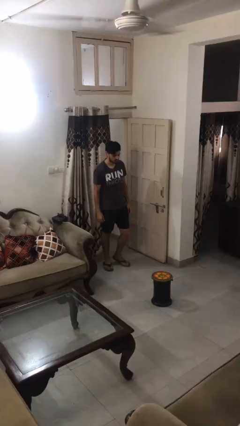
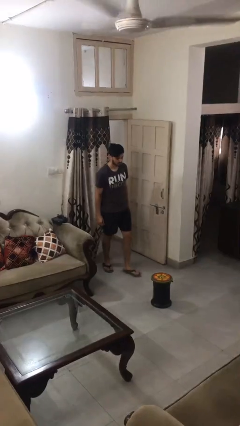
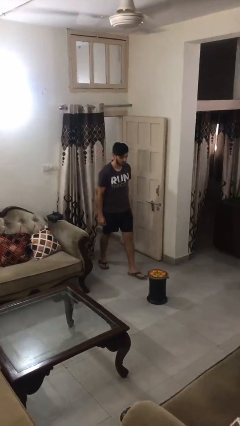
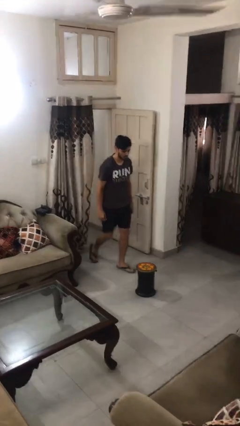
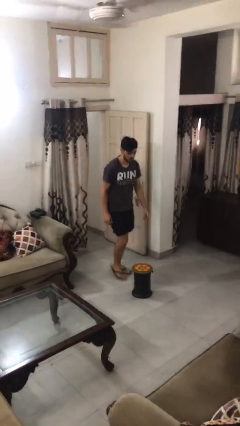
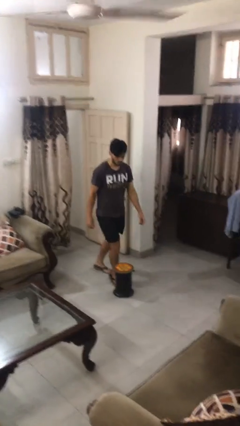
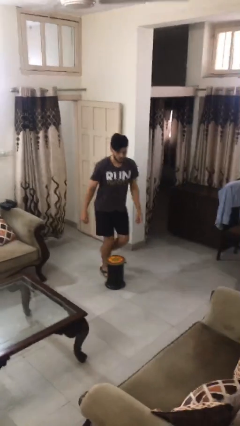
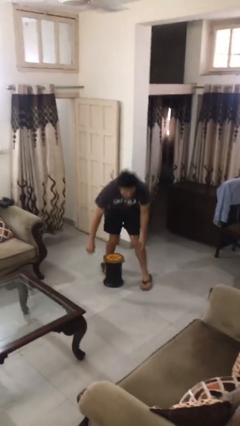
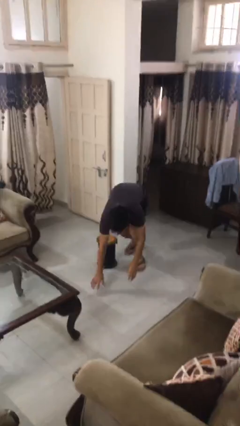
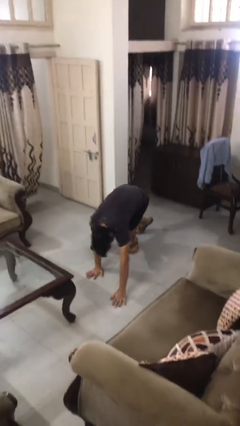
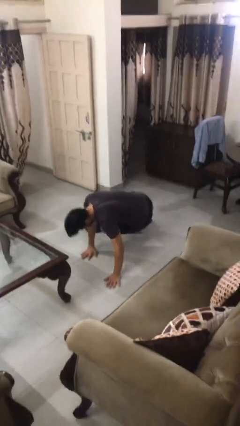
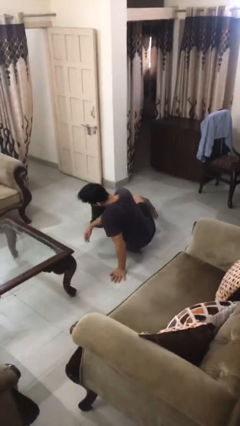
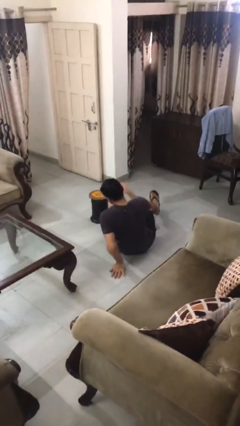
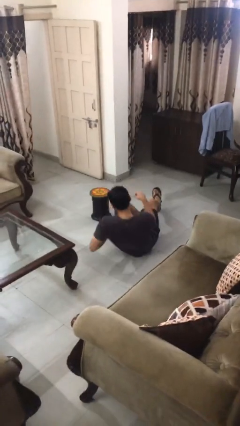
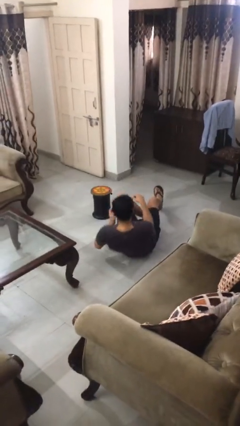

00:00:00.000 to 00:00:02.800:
person trips on object on floor

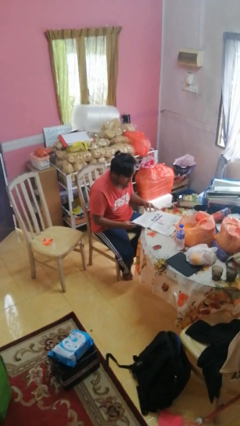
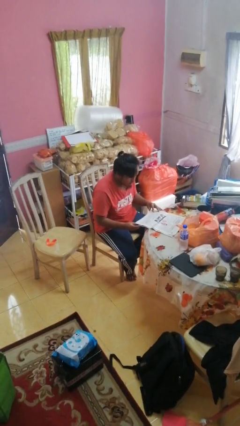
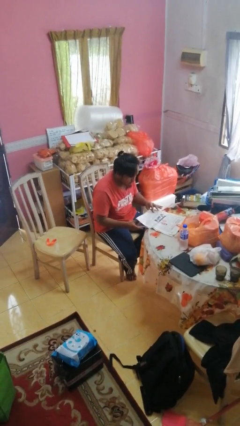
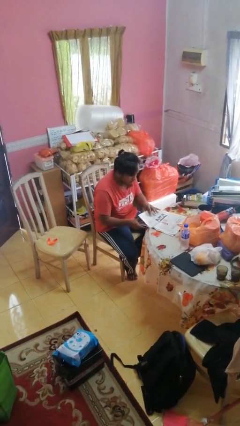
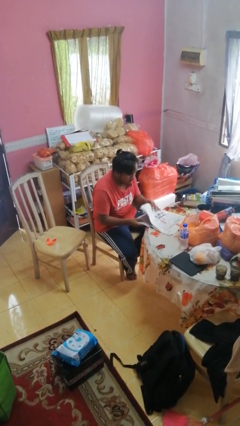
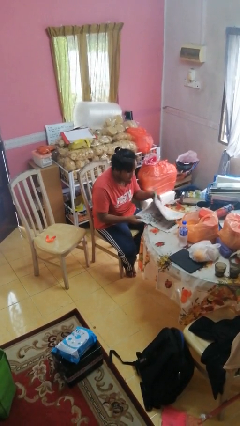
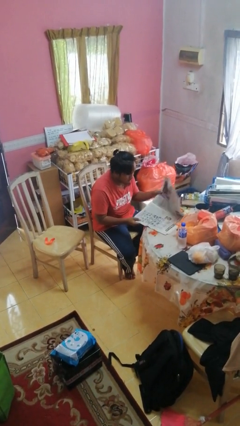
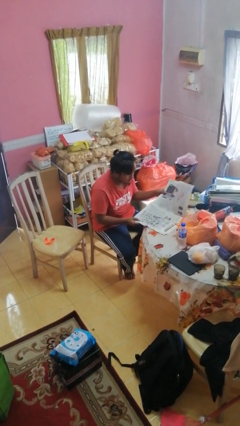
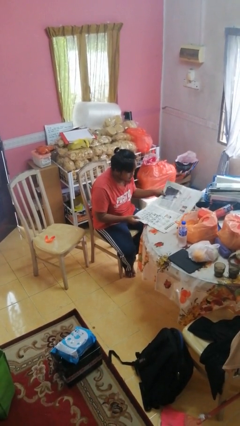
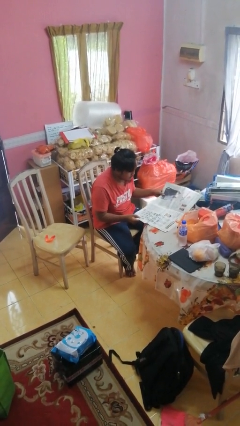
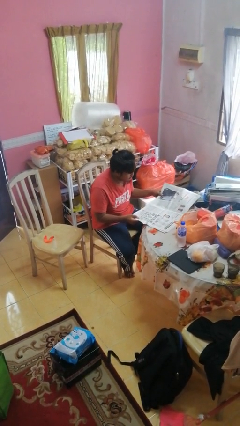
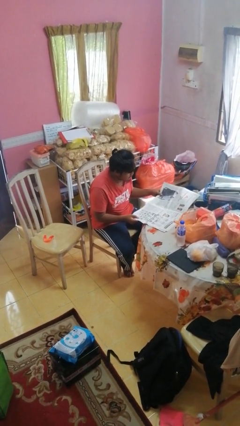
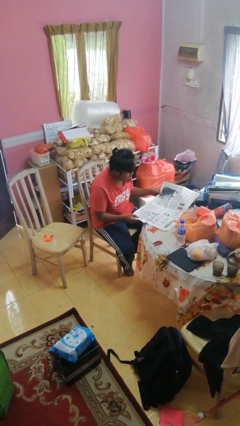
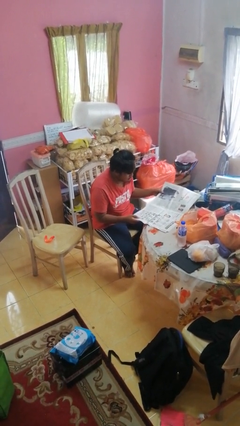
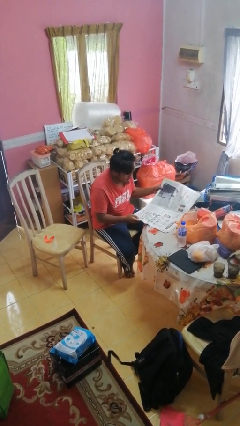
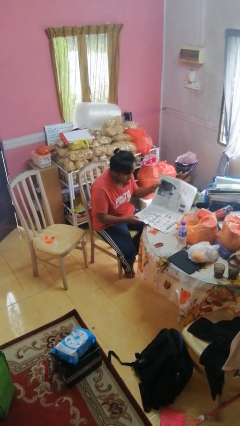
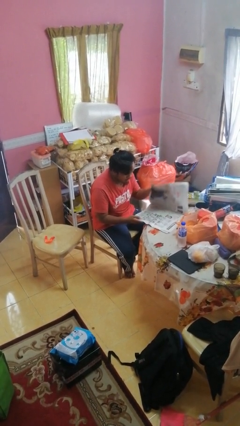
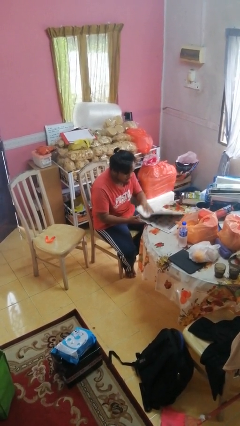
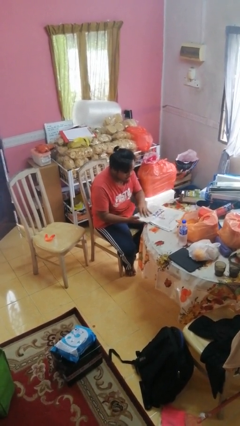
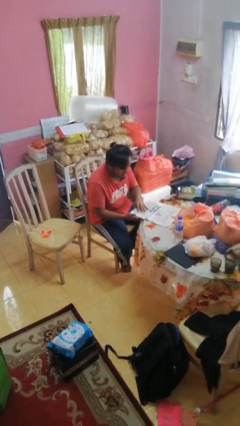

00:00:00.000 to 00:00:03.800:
person reads newspaper

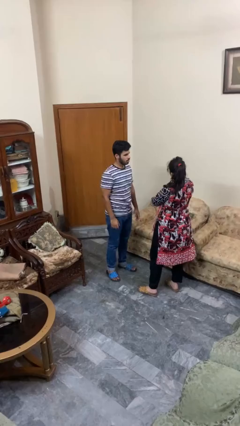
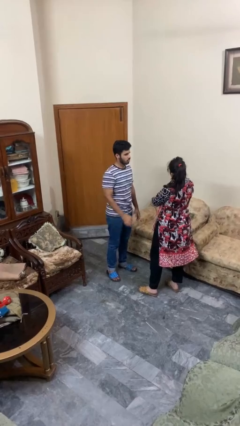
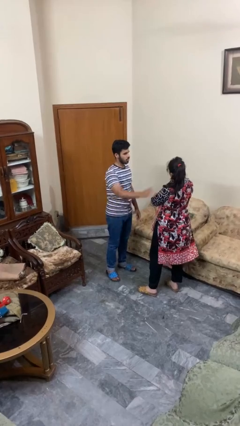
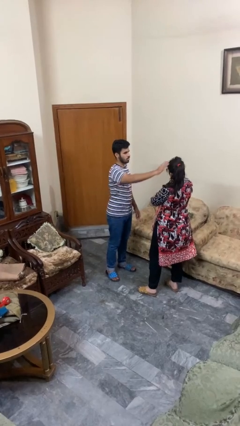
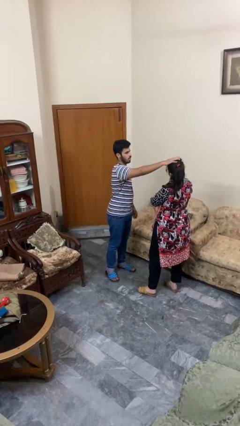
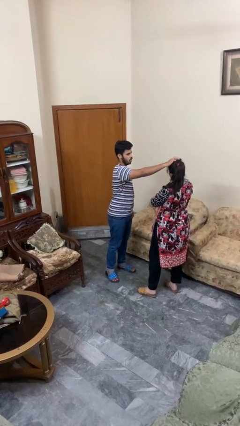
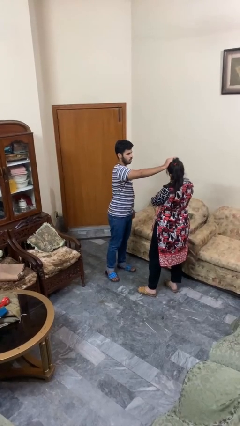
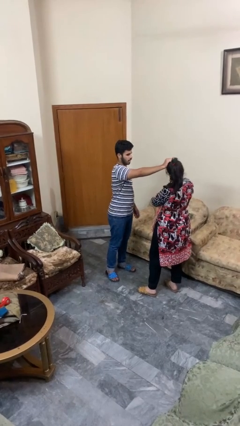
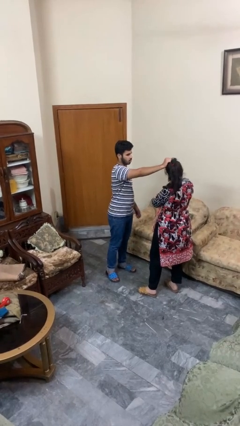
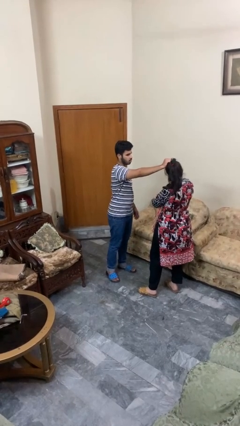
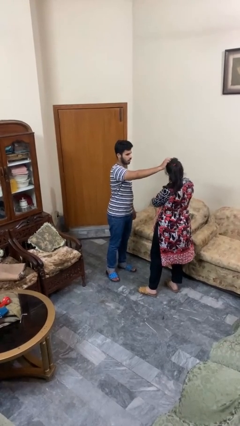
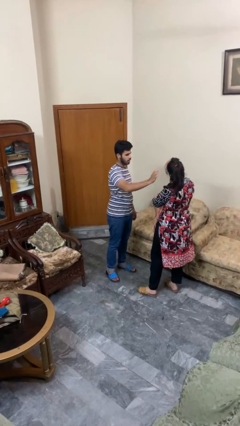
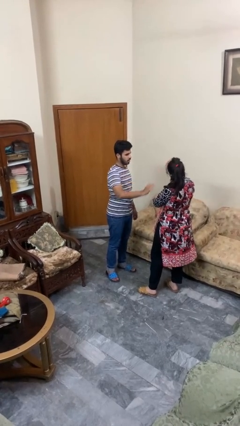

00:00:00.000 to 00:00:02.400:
person grabs person by hair

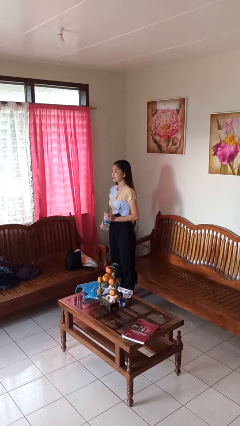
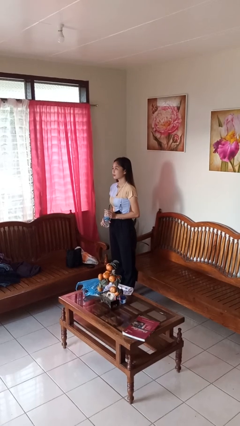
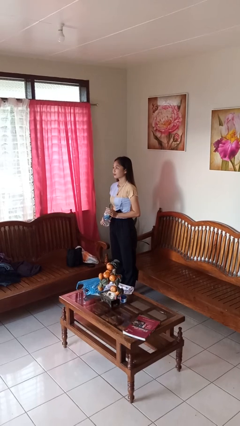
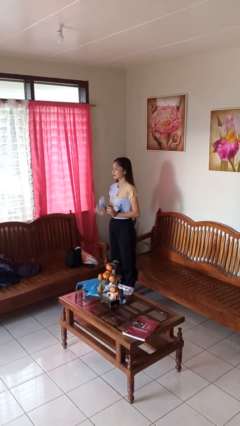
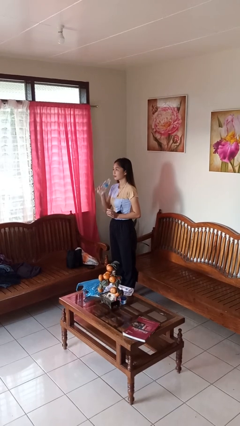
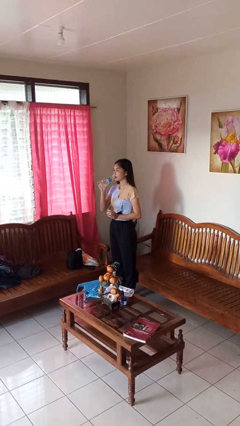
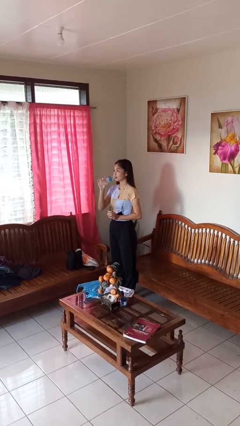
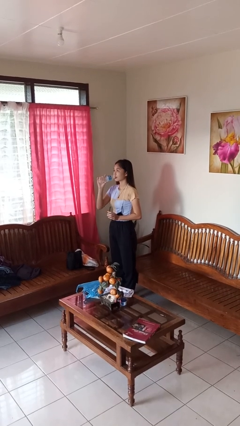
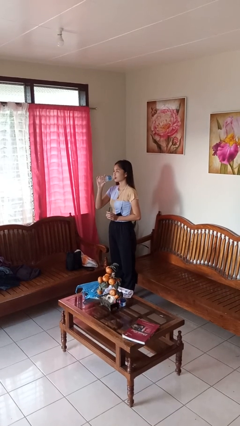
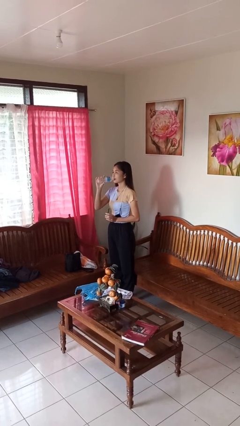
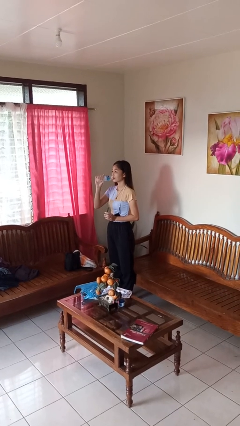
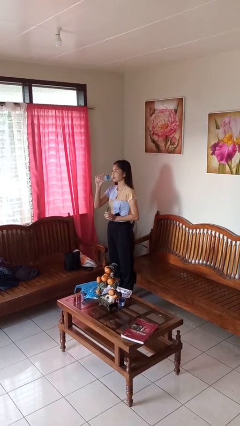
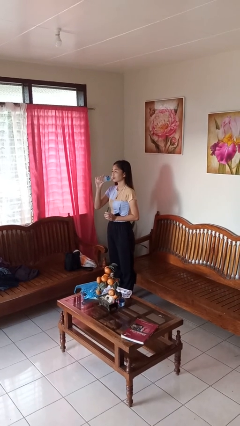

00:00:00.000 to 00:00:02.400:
person drinks from bottle

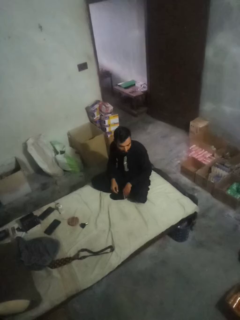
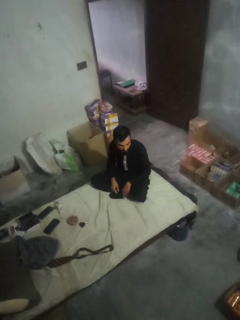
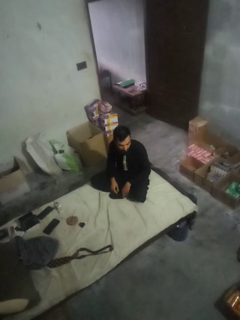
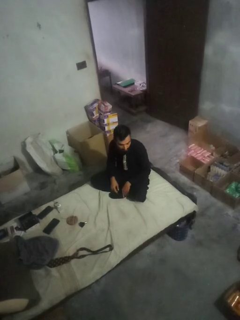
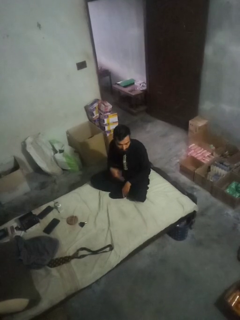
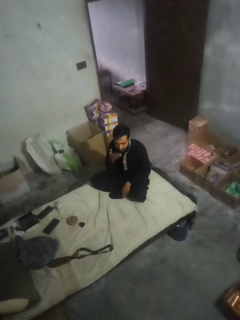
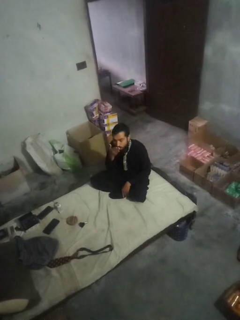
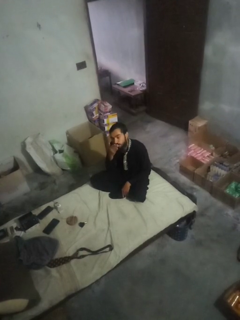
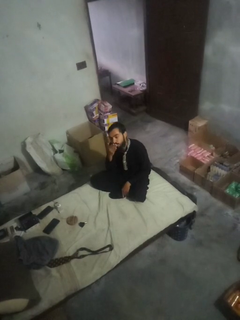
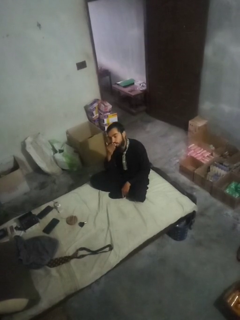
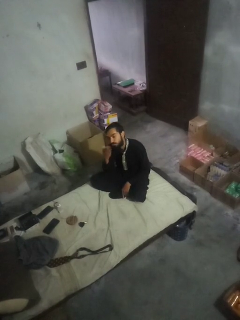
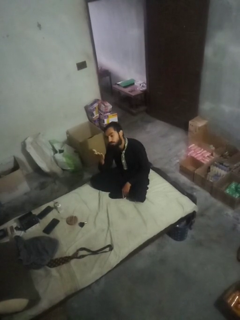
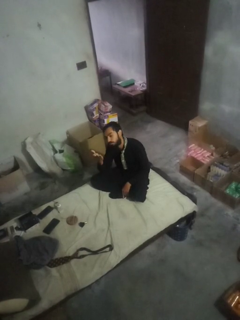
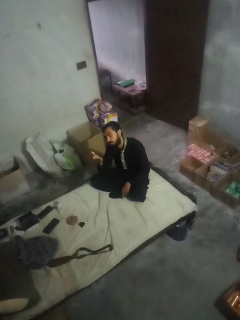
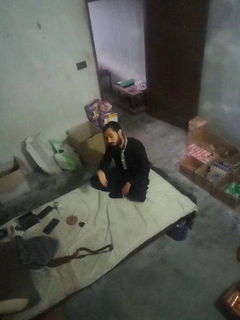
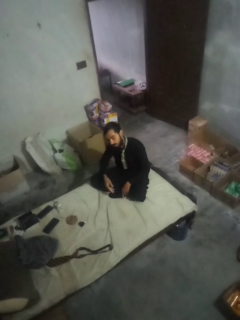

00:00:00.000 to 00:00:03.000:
person gestures blow kiss

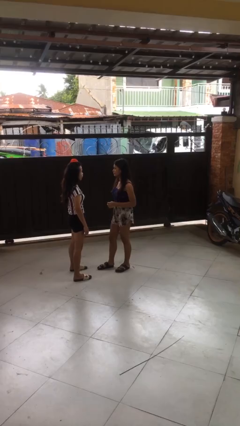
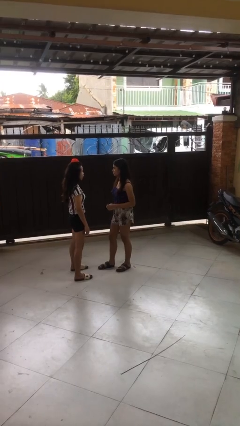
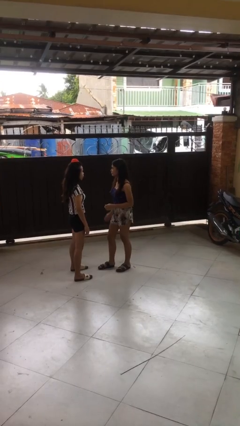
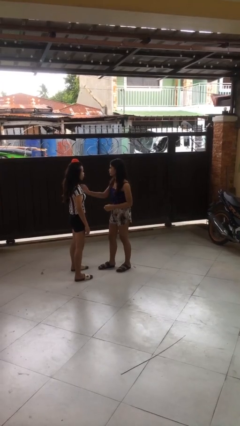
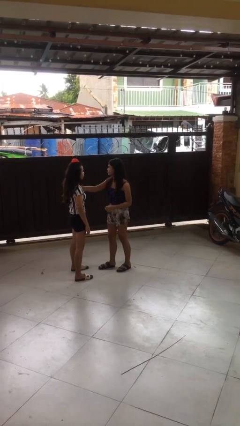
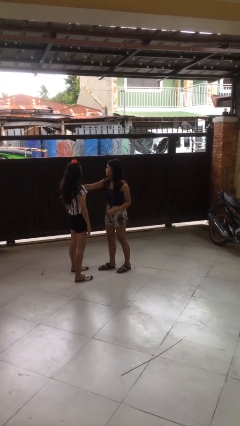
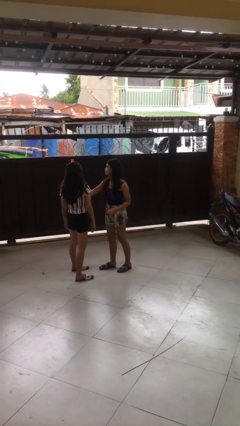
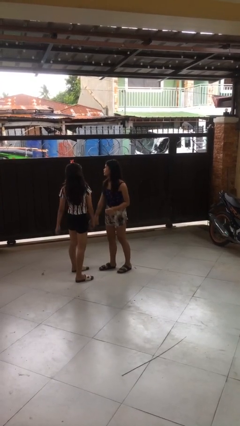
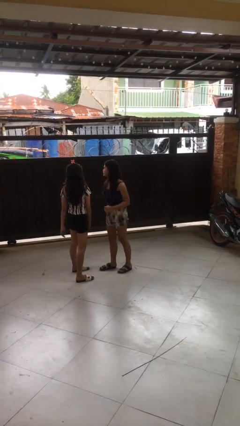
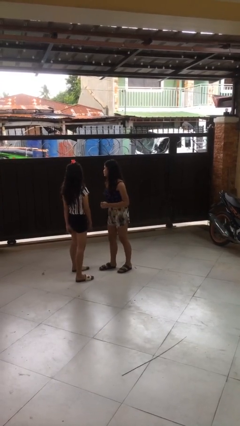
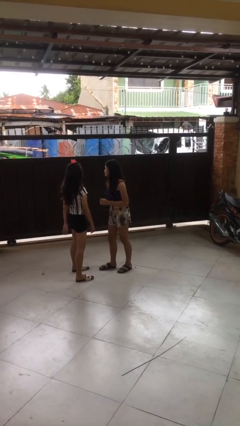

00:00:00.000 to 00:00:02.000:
person shoves person

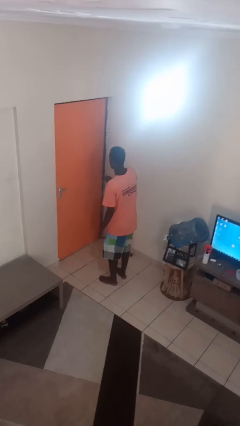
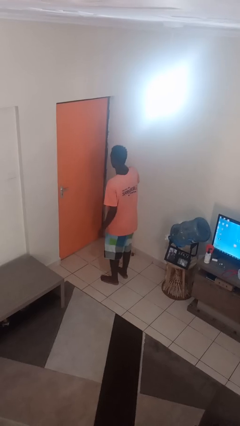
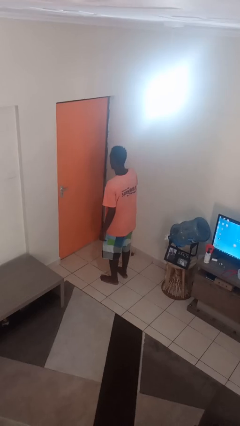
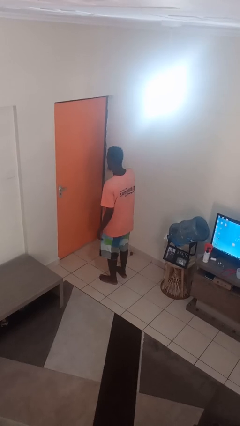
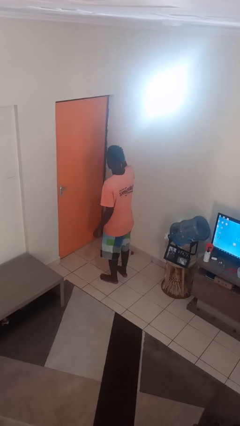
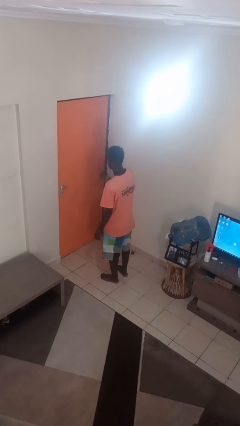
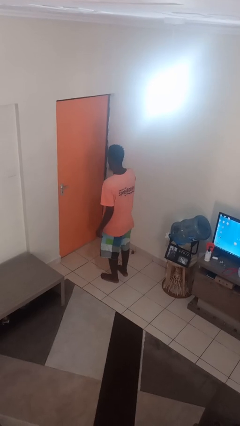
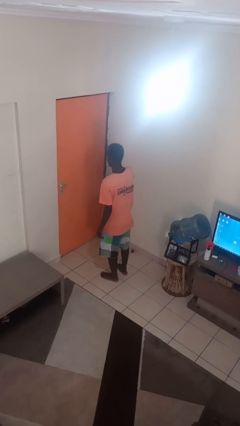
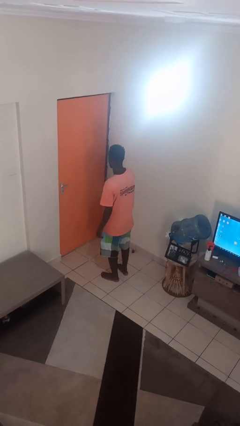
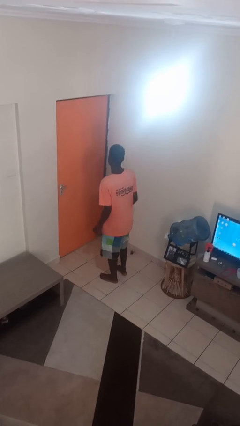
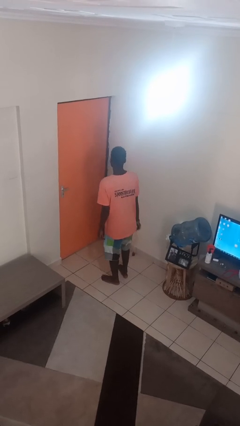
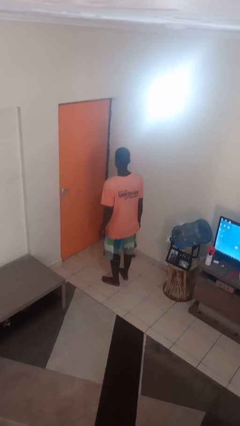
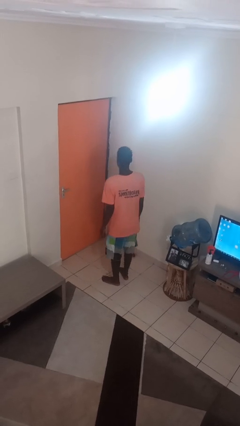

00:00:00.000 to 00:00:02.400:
person snaps fingers
